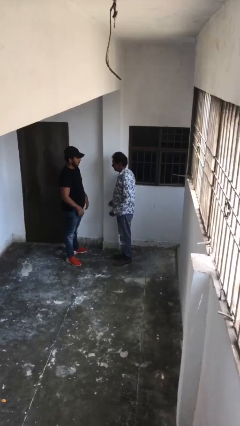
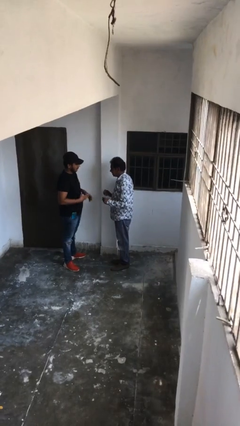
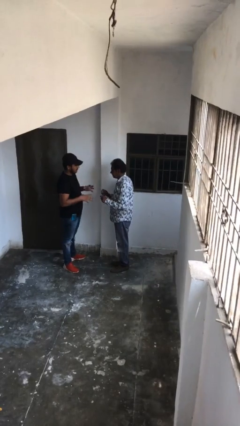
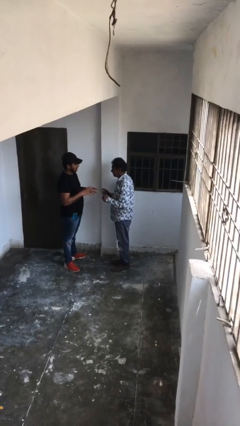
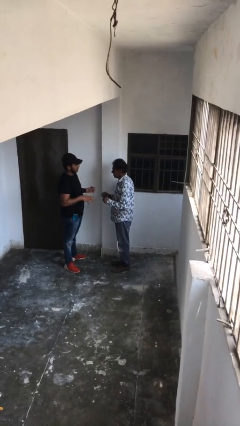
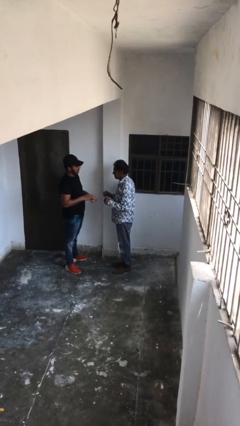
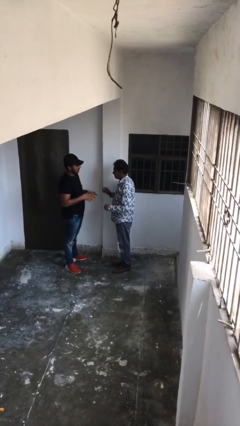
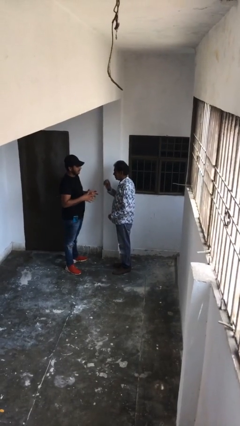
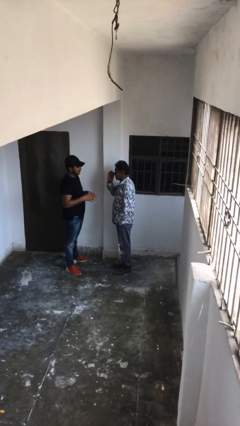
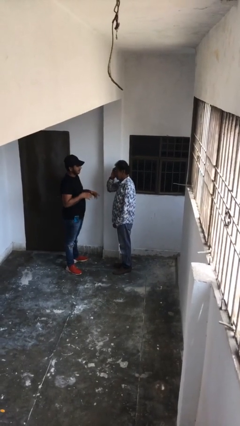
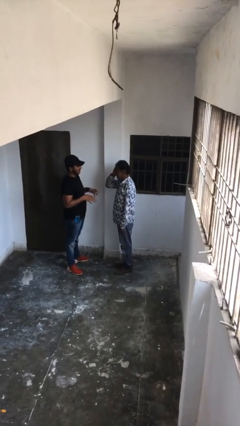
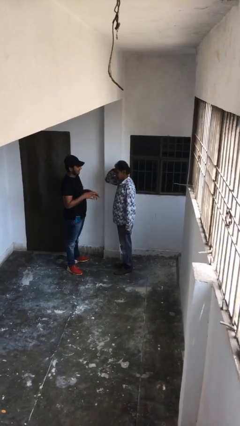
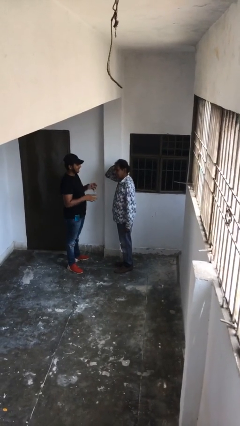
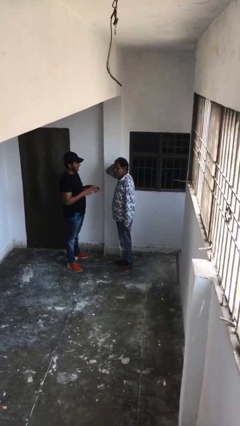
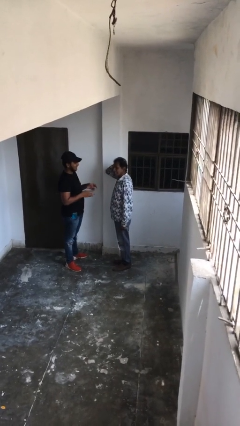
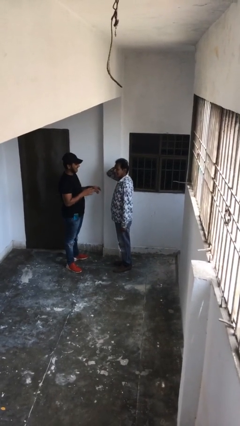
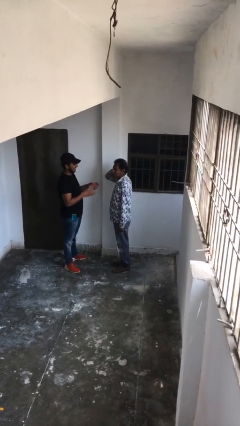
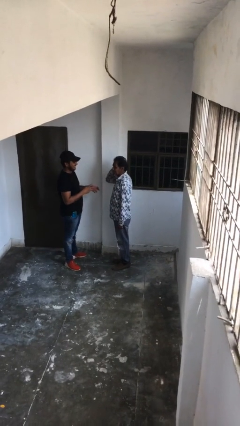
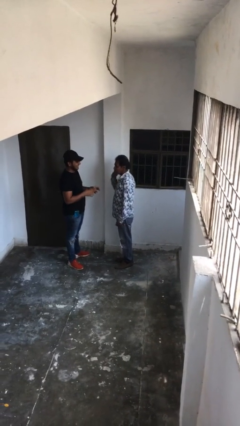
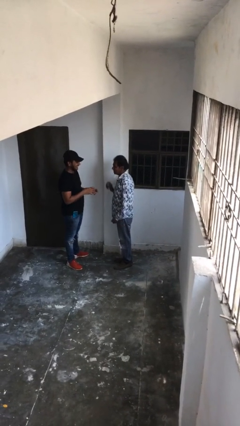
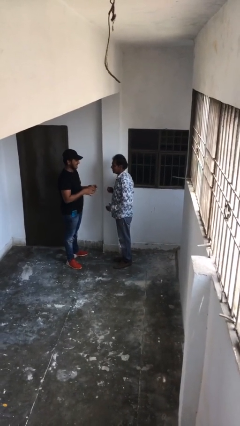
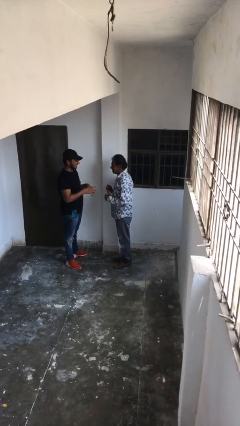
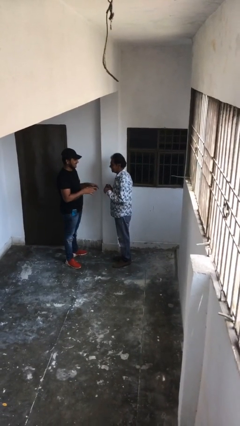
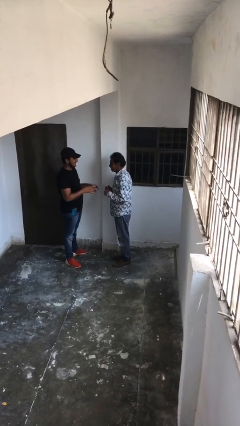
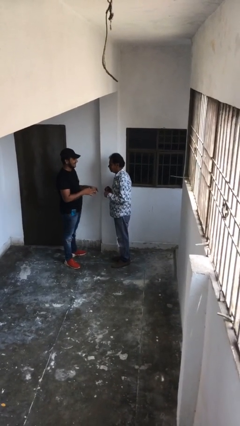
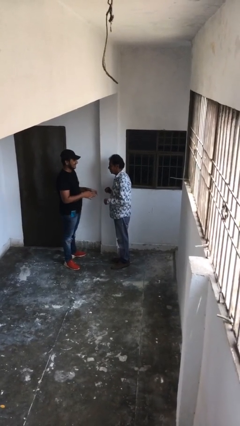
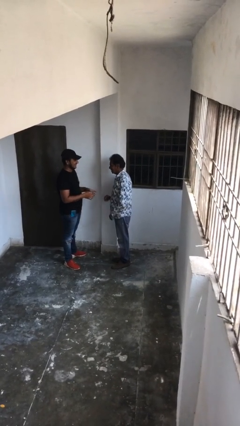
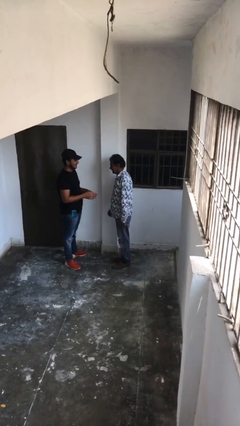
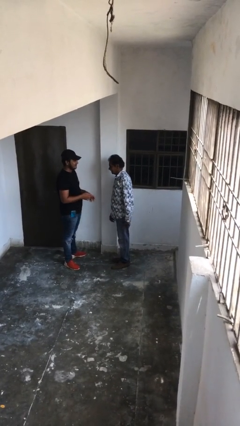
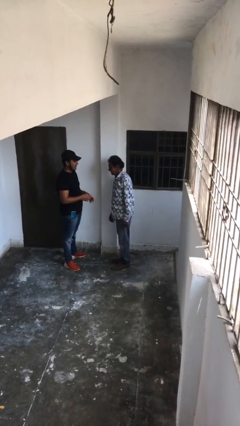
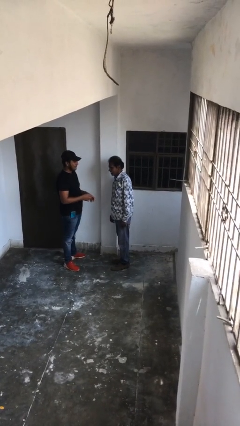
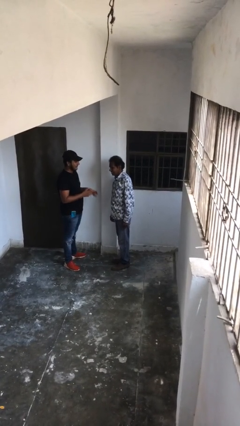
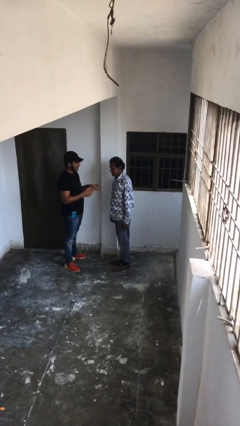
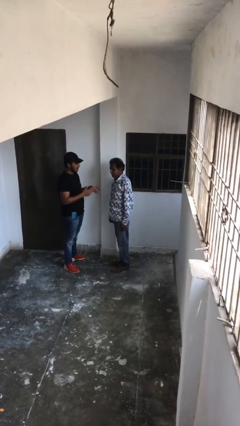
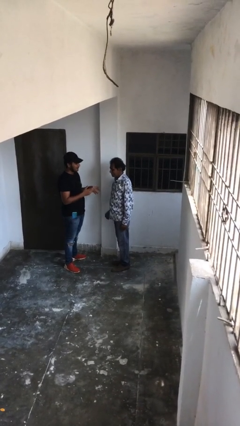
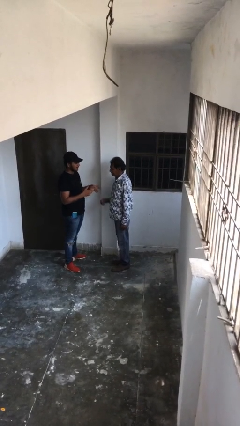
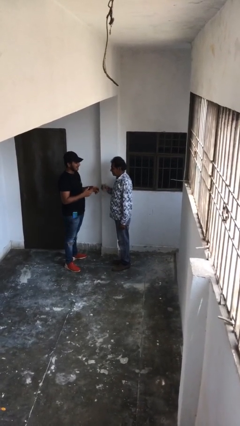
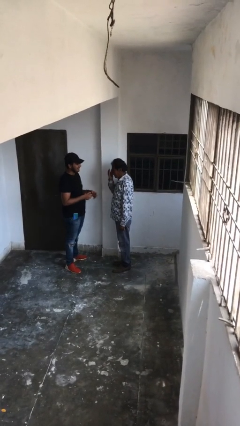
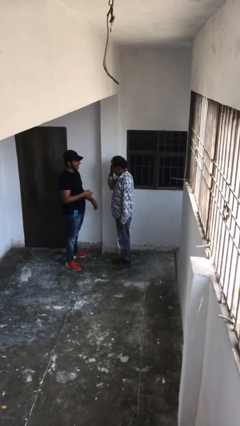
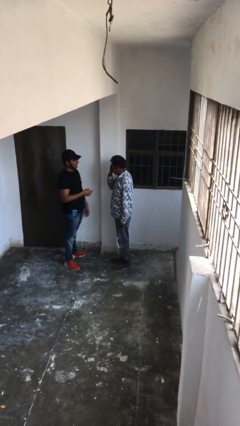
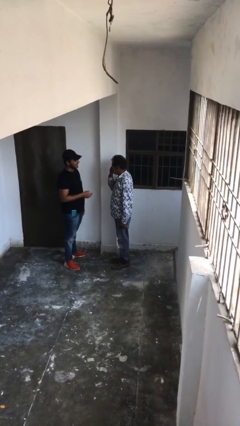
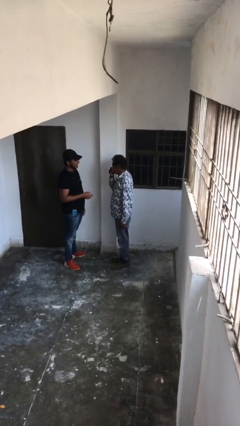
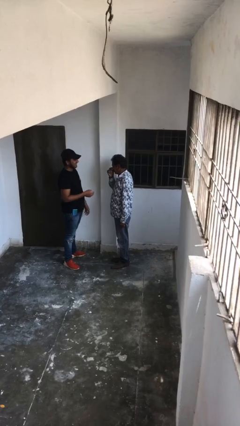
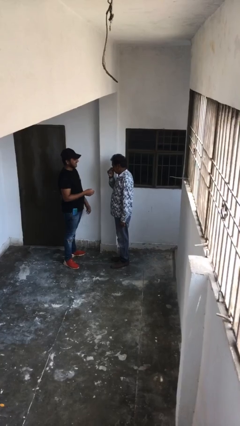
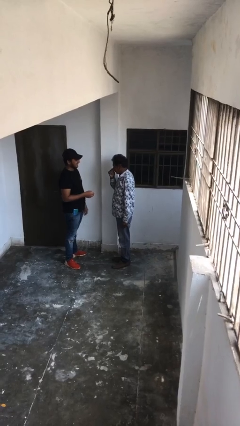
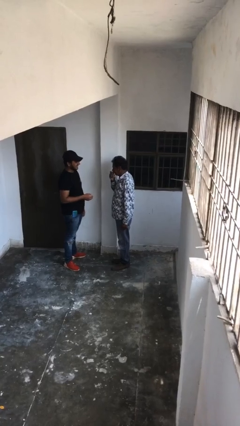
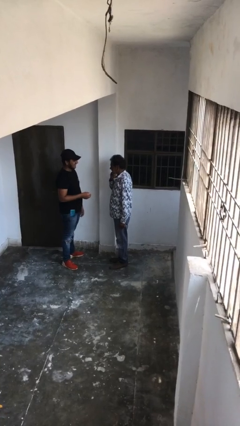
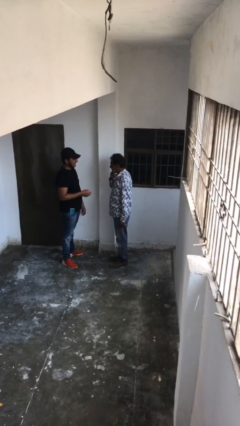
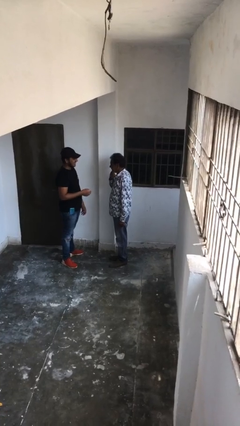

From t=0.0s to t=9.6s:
person talks to person

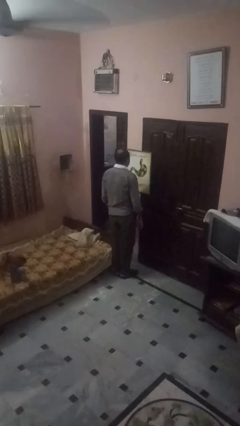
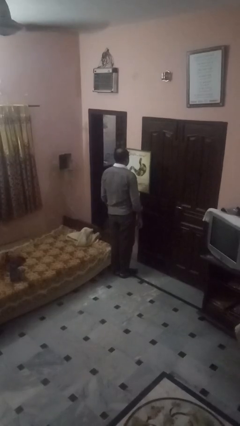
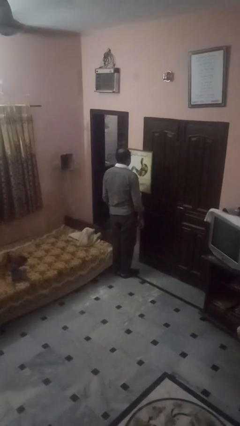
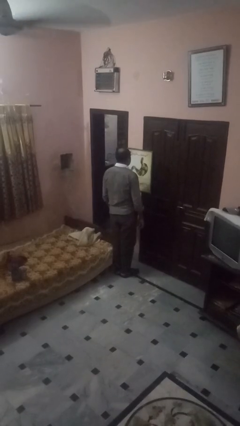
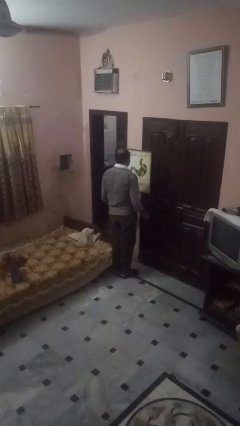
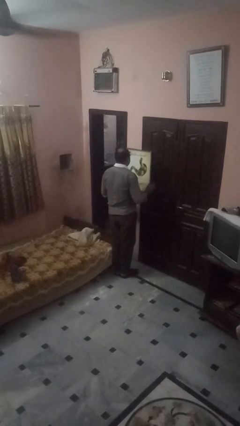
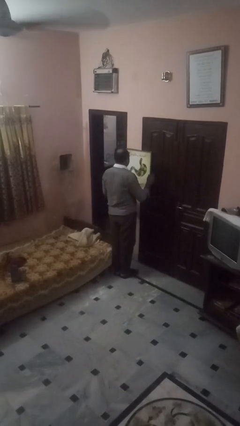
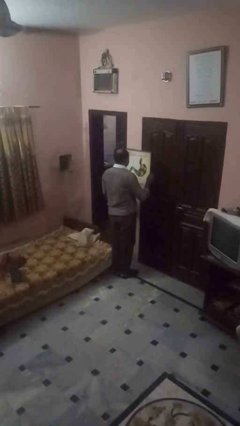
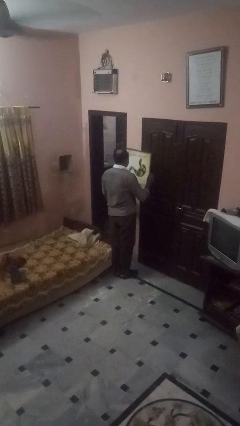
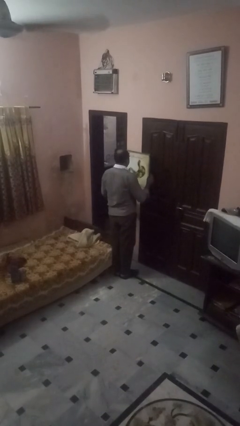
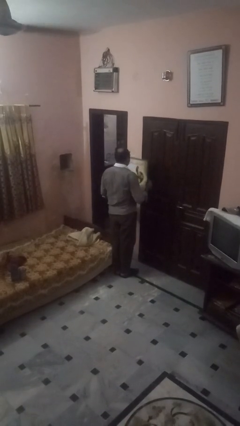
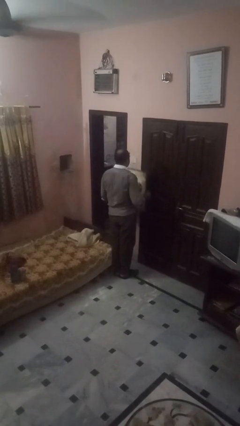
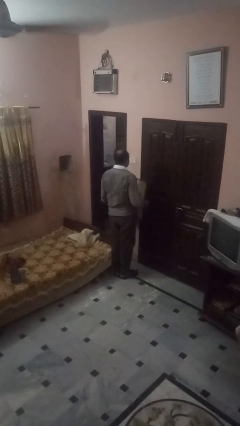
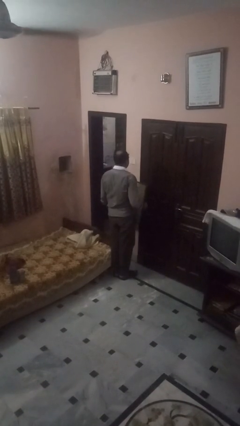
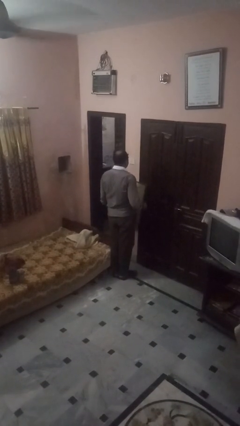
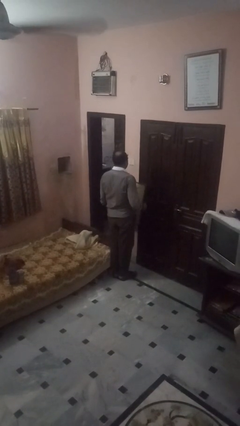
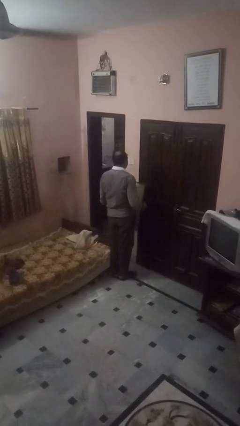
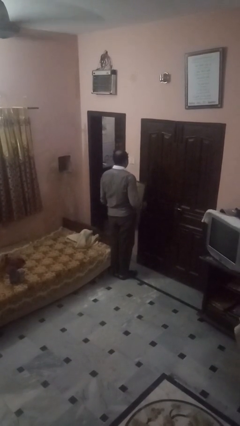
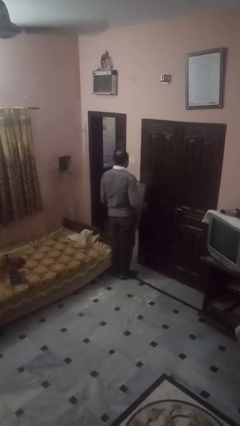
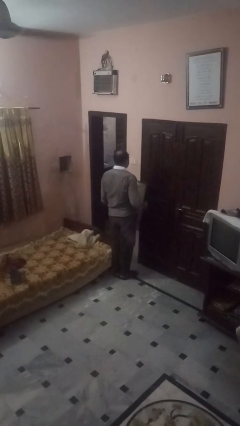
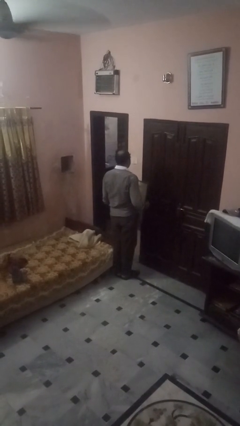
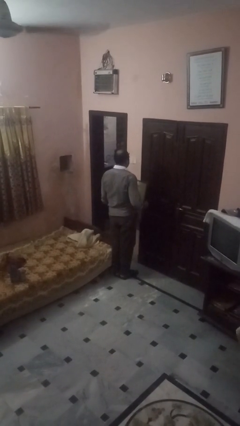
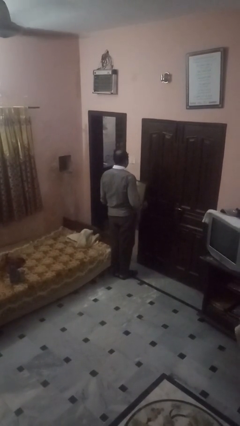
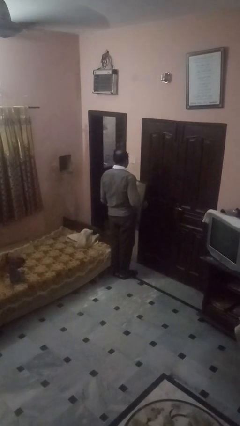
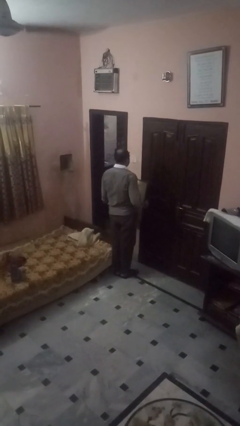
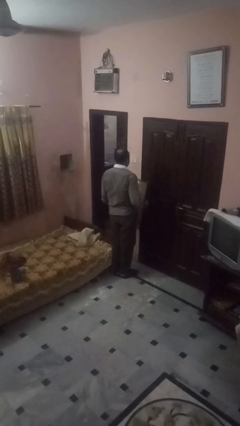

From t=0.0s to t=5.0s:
person takes down picture frame

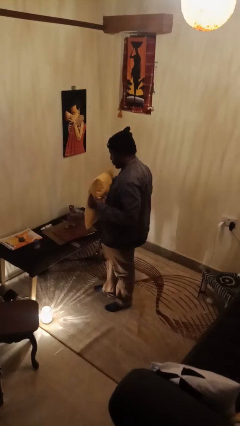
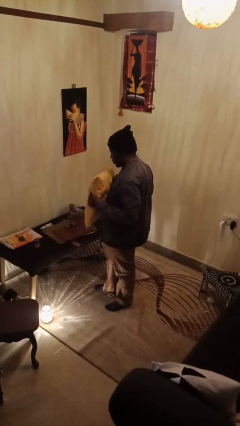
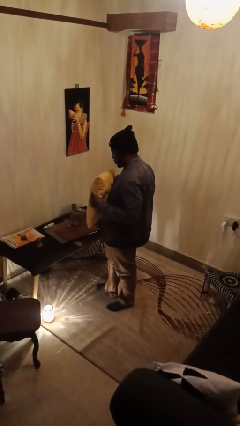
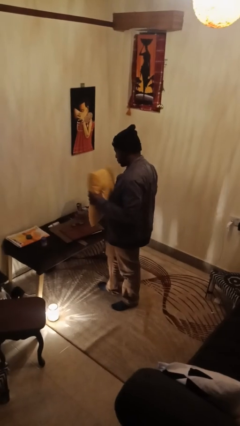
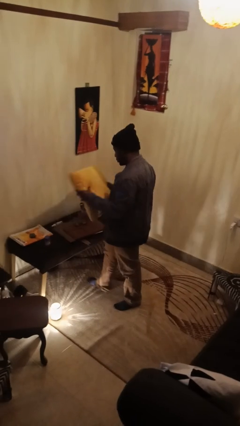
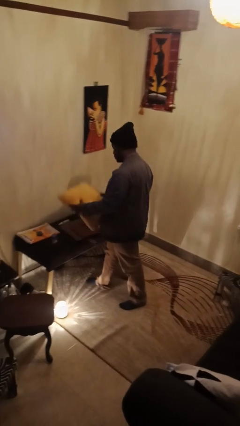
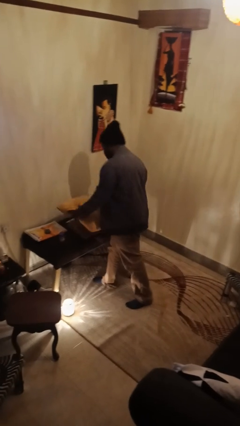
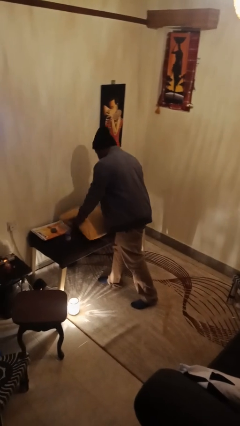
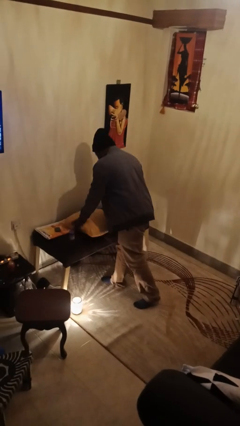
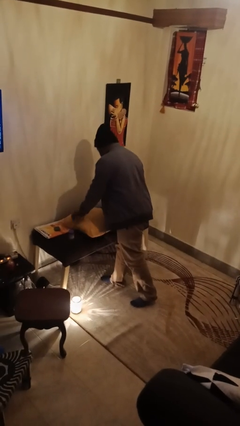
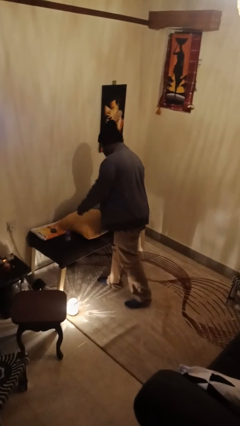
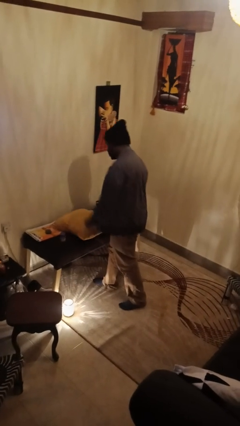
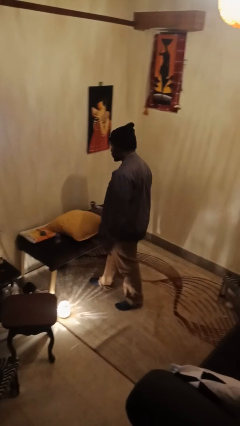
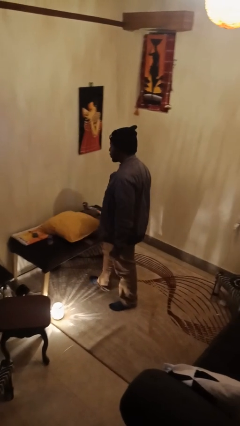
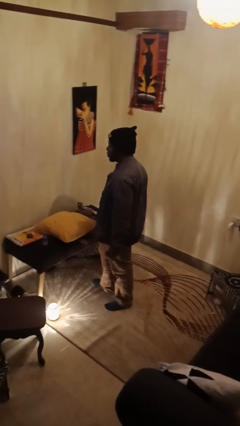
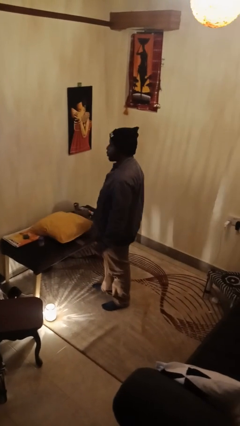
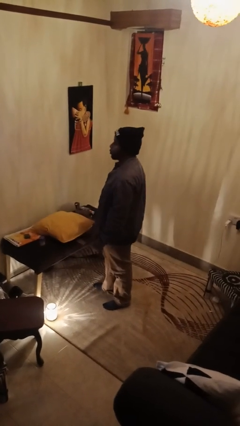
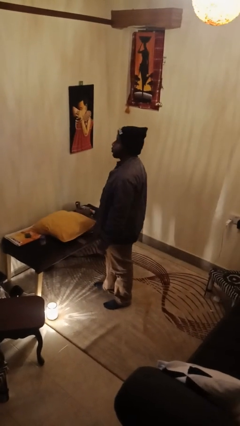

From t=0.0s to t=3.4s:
person puts down object on countertop
